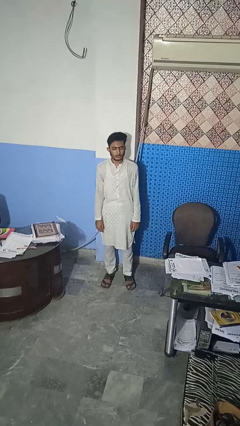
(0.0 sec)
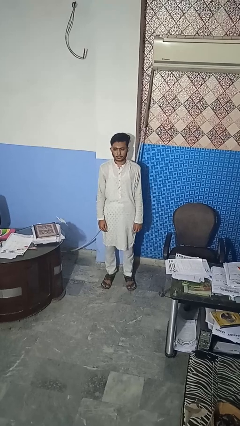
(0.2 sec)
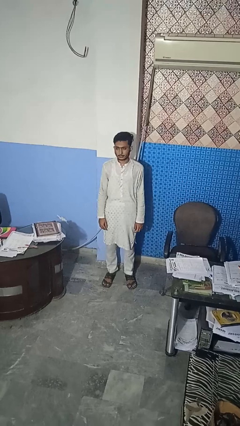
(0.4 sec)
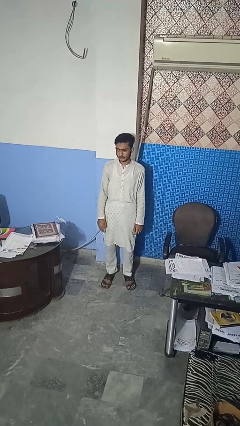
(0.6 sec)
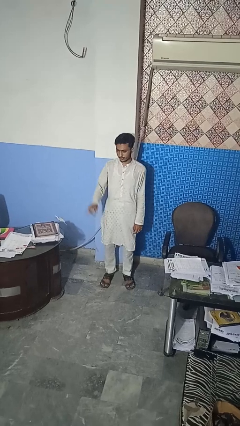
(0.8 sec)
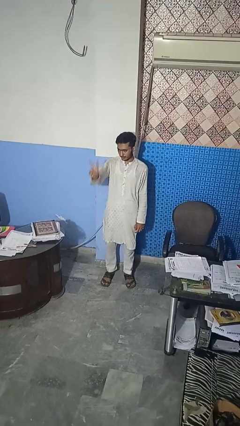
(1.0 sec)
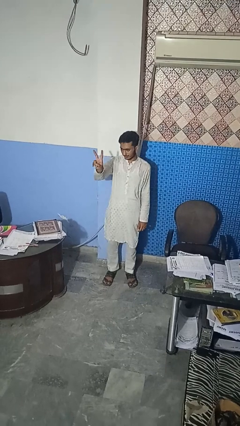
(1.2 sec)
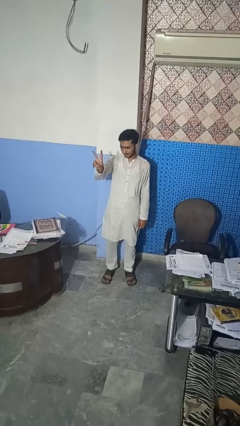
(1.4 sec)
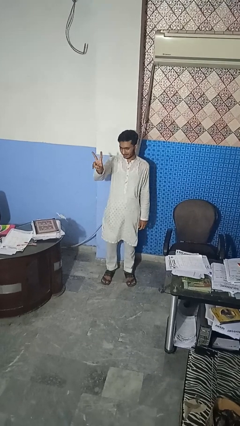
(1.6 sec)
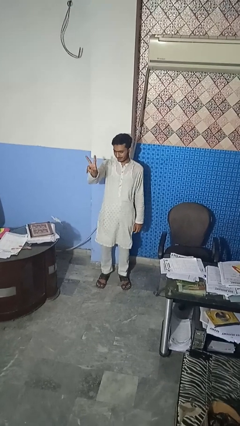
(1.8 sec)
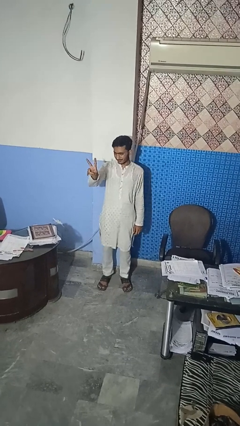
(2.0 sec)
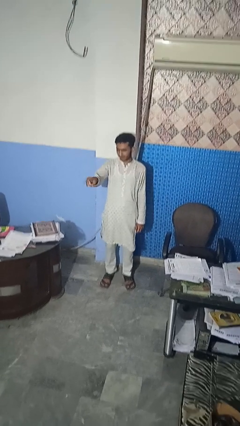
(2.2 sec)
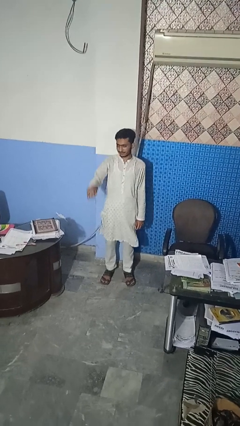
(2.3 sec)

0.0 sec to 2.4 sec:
person gestures peace

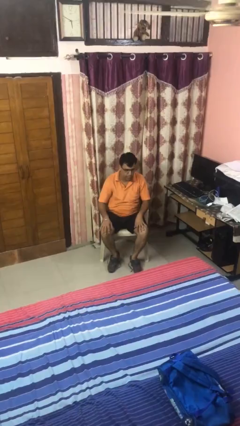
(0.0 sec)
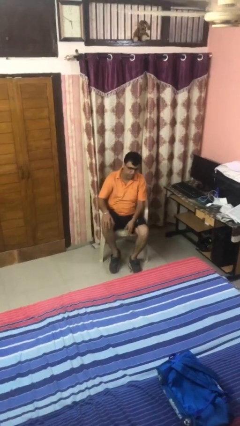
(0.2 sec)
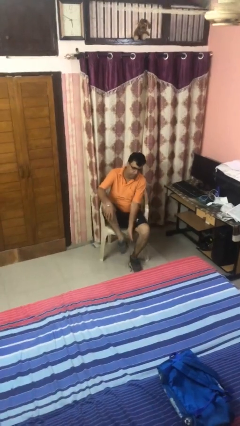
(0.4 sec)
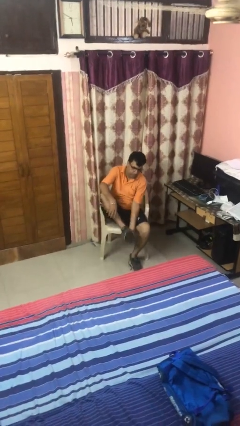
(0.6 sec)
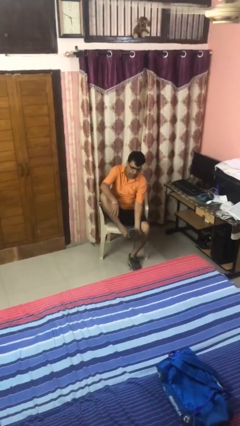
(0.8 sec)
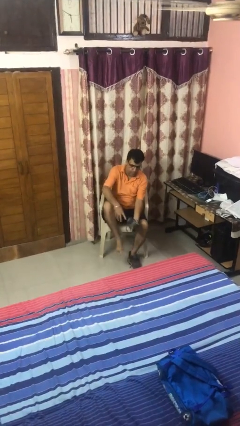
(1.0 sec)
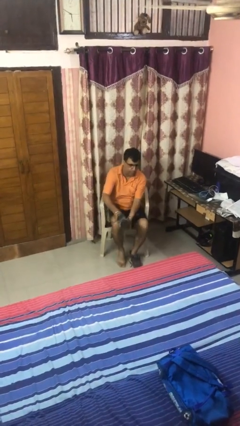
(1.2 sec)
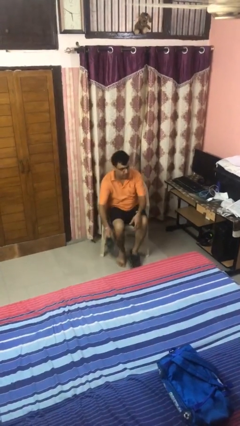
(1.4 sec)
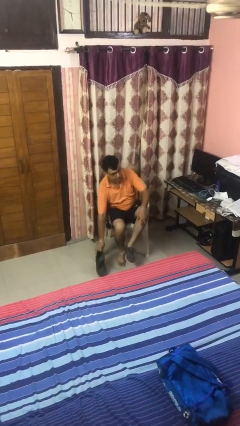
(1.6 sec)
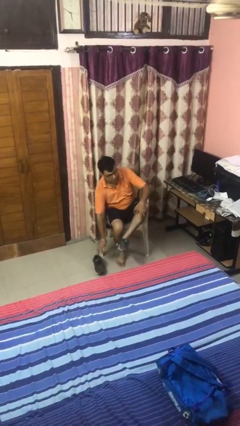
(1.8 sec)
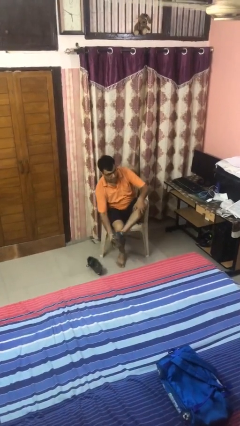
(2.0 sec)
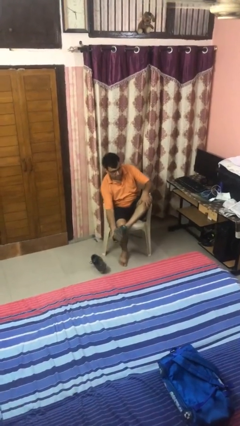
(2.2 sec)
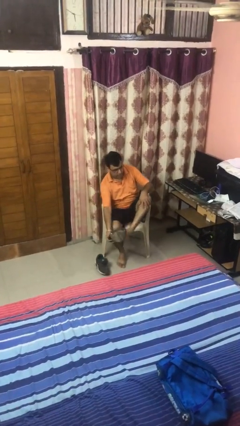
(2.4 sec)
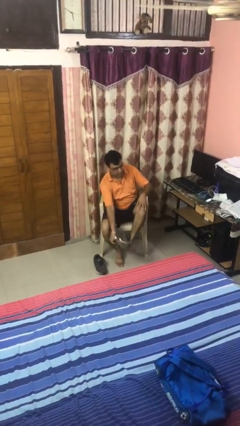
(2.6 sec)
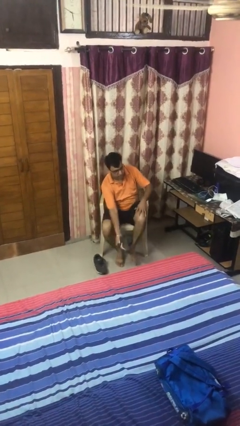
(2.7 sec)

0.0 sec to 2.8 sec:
person takes off boots

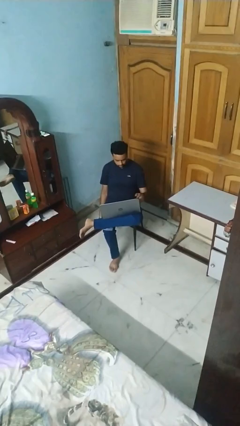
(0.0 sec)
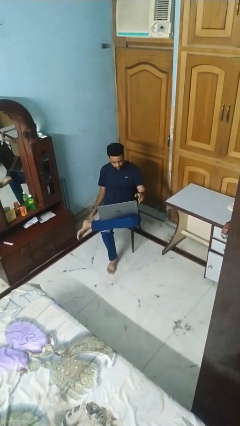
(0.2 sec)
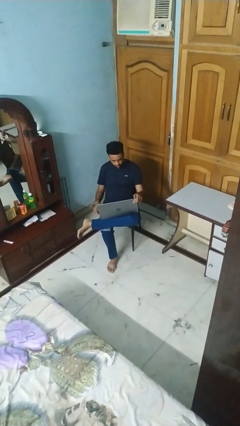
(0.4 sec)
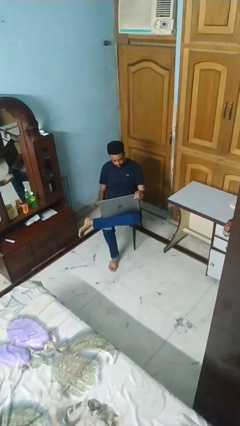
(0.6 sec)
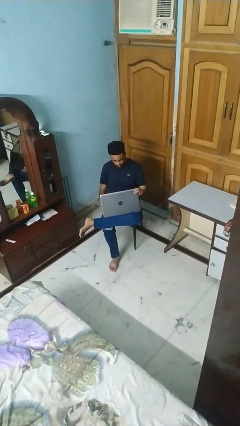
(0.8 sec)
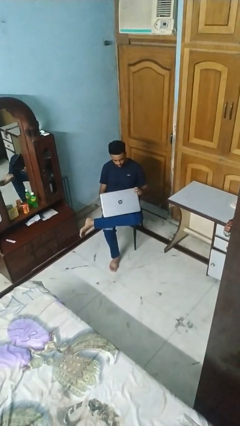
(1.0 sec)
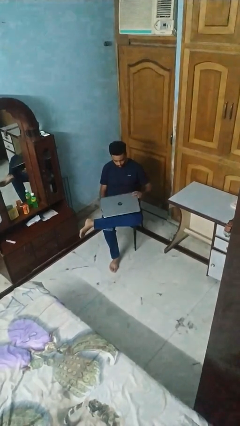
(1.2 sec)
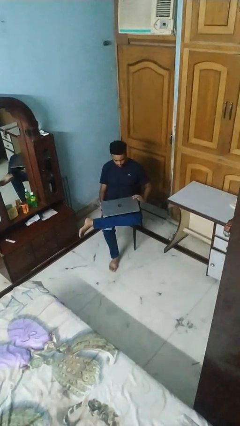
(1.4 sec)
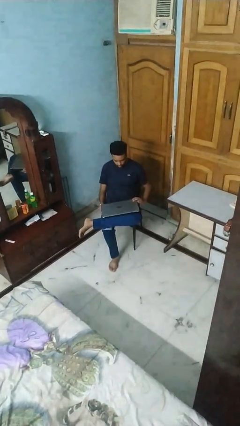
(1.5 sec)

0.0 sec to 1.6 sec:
person closes laptop

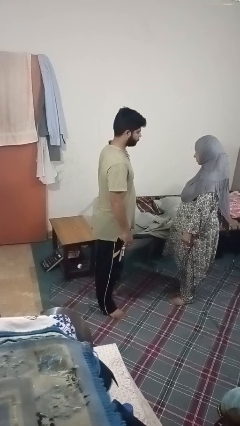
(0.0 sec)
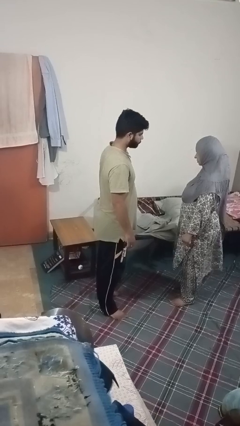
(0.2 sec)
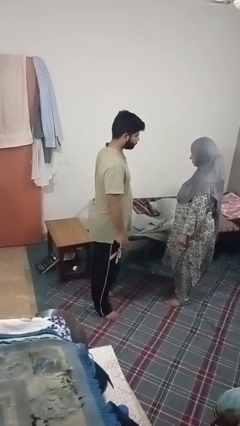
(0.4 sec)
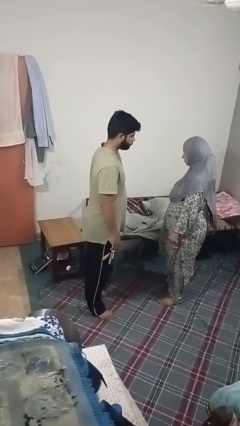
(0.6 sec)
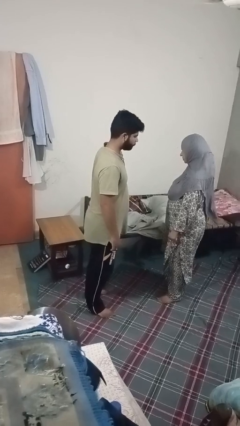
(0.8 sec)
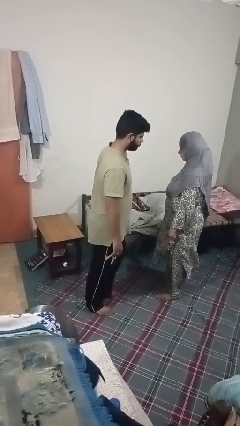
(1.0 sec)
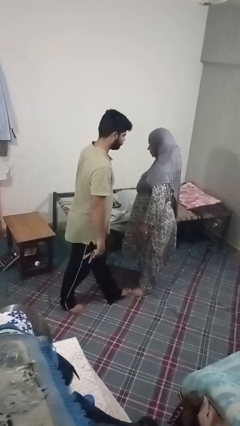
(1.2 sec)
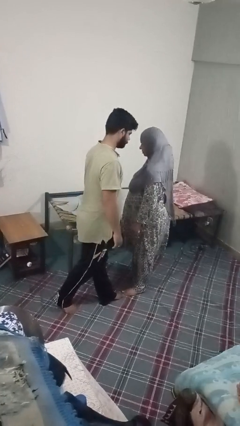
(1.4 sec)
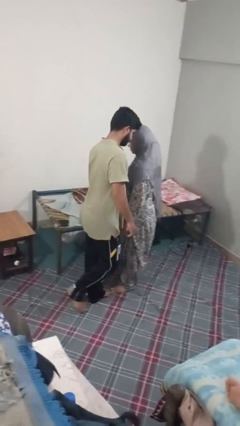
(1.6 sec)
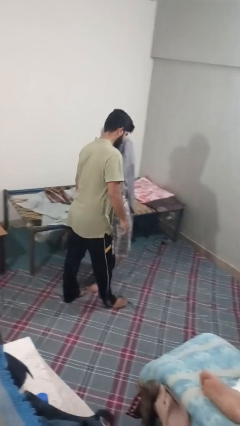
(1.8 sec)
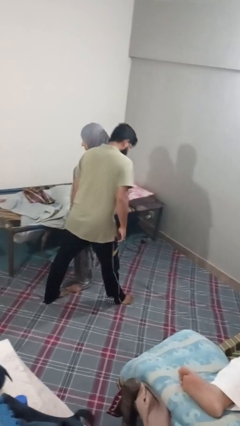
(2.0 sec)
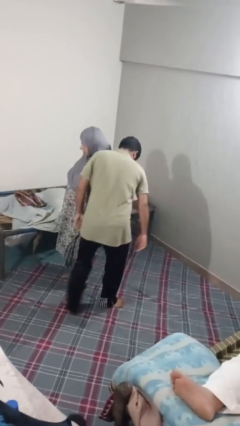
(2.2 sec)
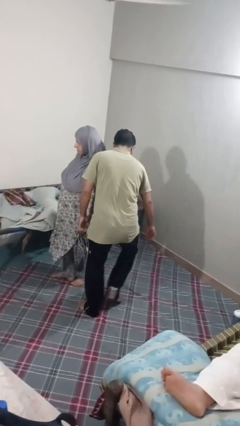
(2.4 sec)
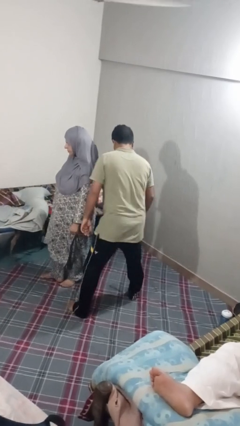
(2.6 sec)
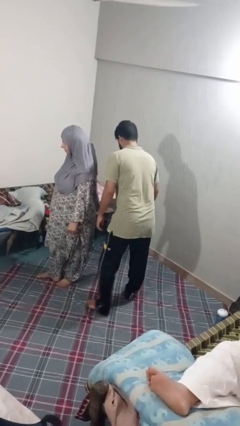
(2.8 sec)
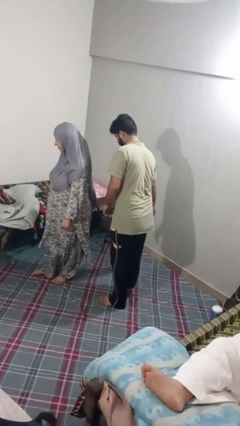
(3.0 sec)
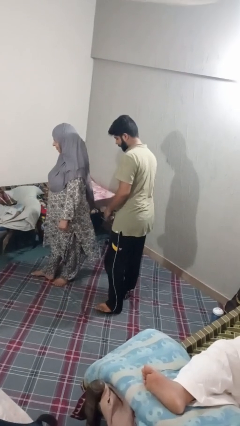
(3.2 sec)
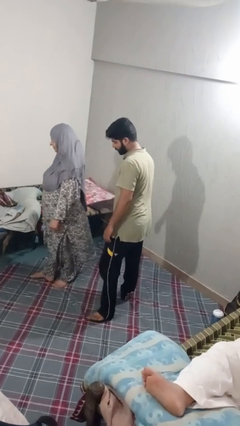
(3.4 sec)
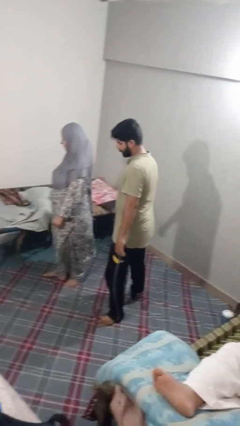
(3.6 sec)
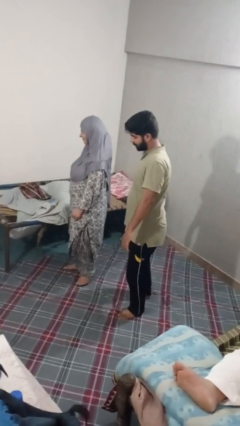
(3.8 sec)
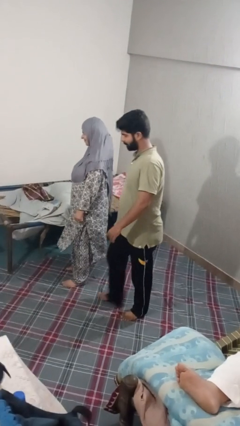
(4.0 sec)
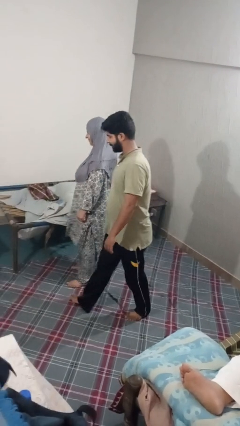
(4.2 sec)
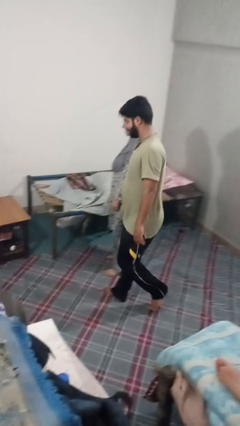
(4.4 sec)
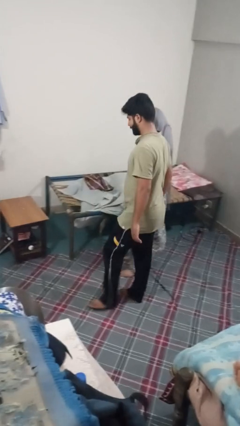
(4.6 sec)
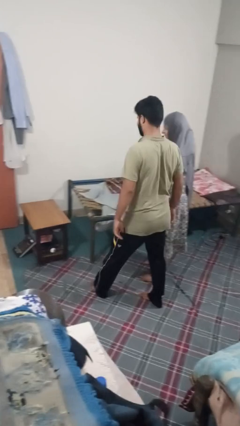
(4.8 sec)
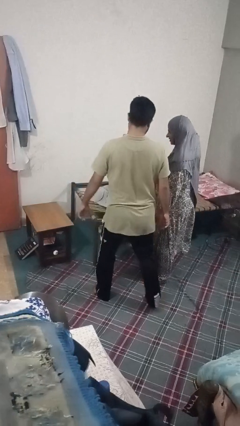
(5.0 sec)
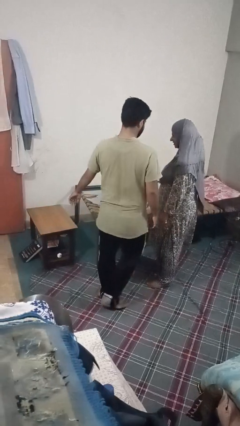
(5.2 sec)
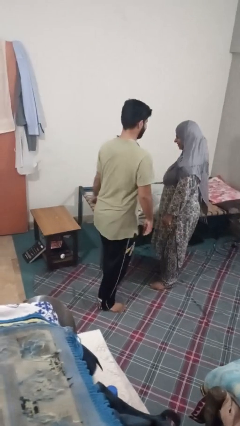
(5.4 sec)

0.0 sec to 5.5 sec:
person bumps into person

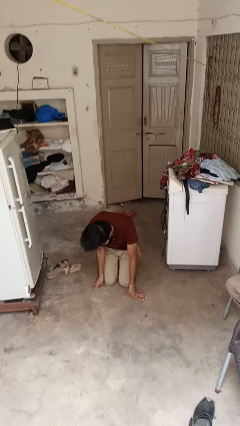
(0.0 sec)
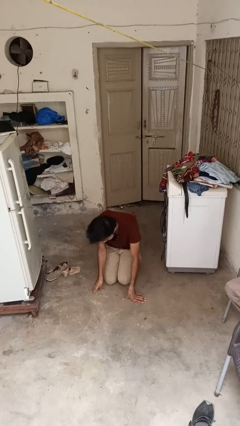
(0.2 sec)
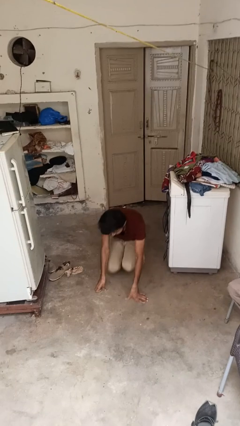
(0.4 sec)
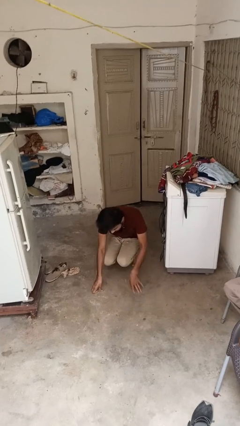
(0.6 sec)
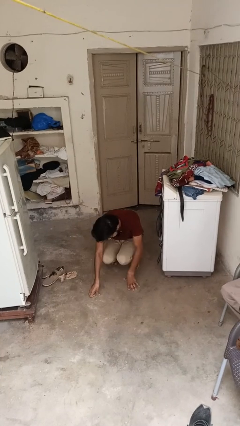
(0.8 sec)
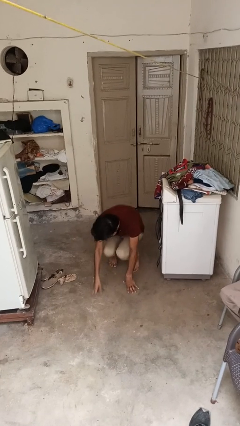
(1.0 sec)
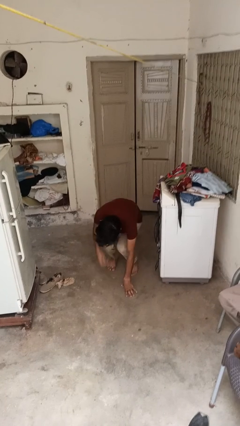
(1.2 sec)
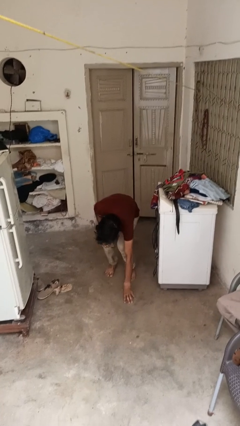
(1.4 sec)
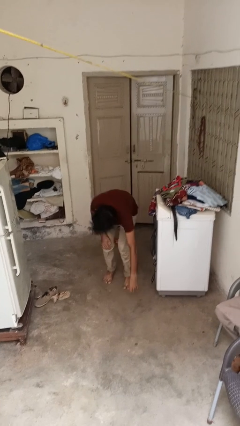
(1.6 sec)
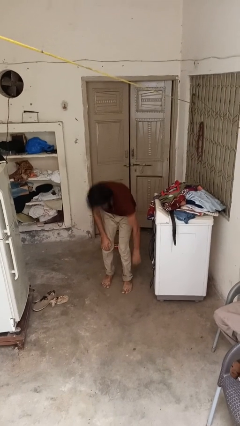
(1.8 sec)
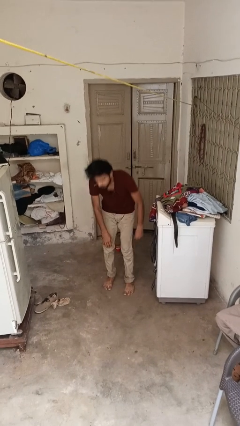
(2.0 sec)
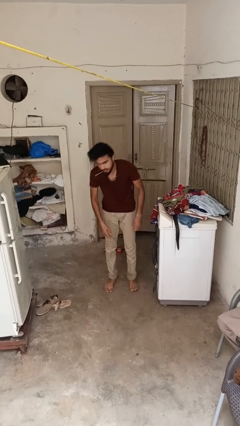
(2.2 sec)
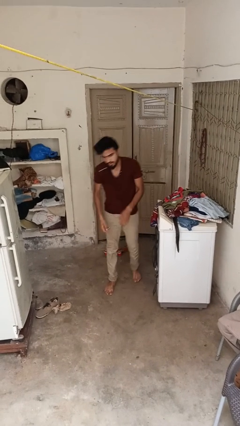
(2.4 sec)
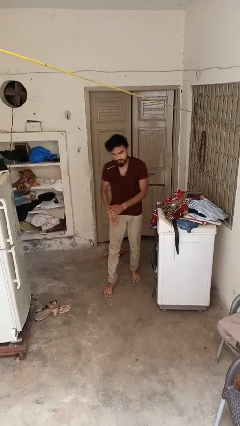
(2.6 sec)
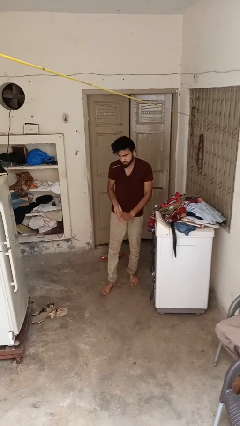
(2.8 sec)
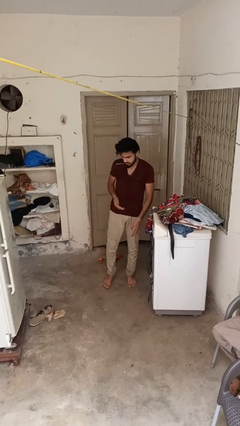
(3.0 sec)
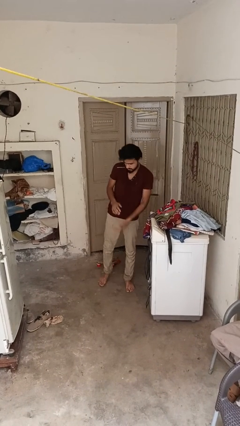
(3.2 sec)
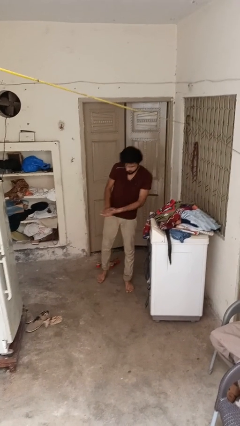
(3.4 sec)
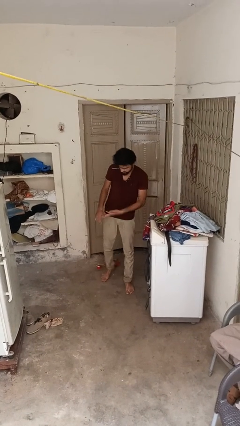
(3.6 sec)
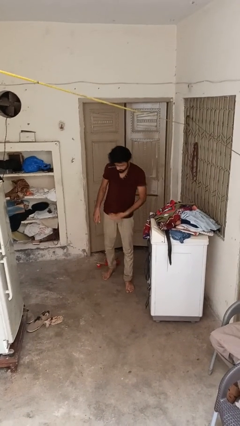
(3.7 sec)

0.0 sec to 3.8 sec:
person stands up from floor

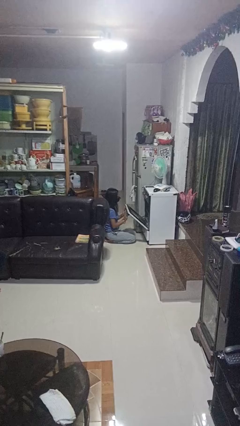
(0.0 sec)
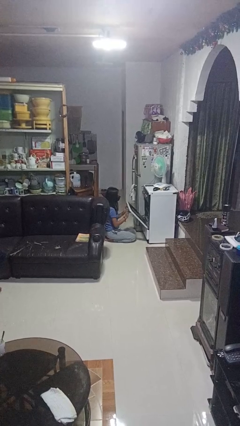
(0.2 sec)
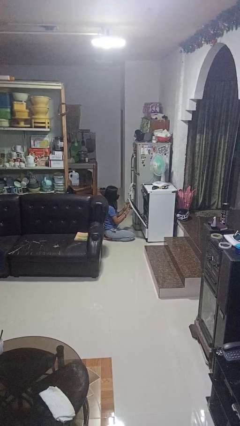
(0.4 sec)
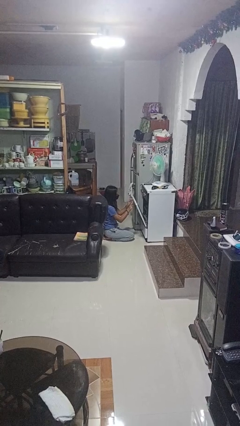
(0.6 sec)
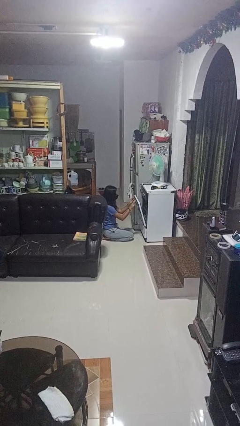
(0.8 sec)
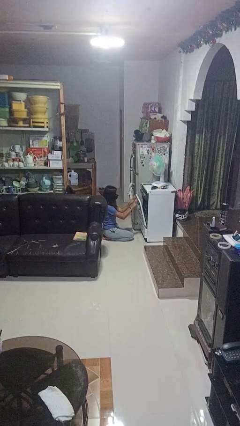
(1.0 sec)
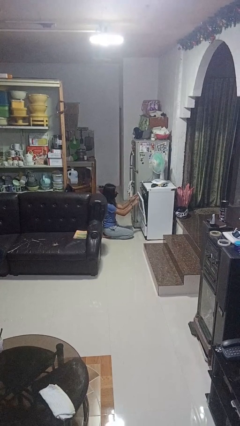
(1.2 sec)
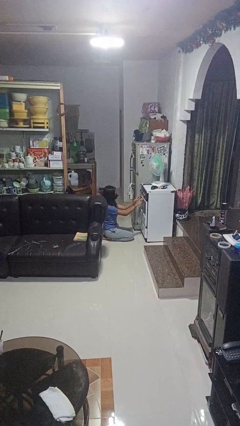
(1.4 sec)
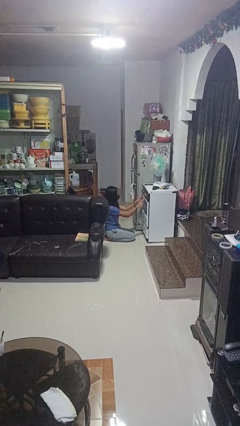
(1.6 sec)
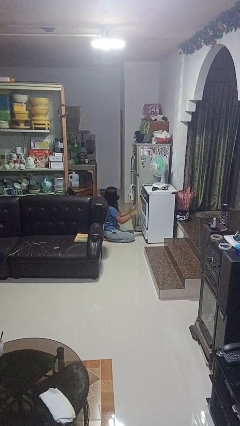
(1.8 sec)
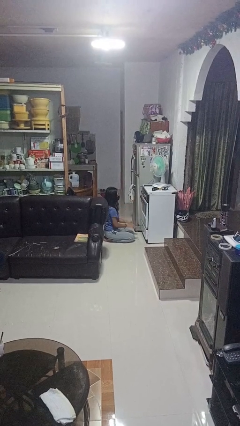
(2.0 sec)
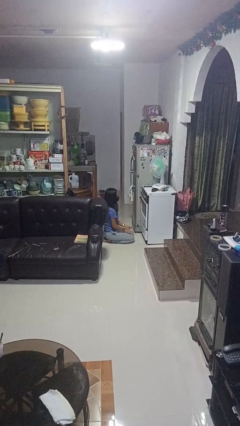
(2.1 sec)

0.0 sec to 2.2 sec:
person closes oven door
